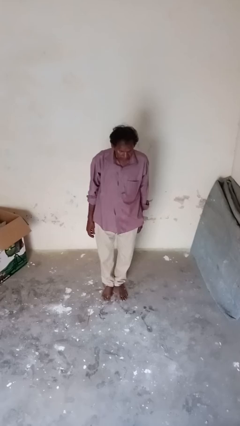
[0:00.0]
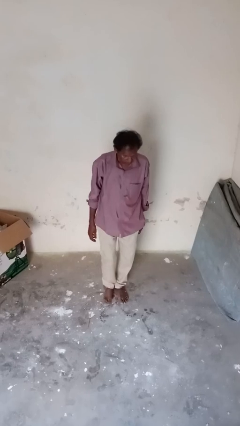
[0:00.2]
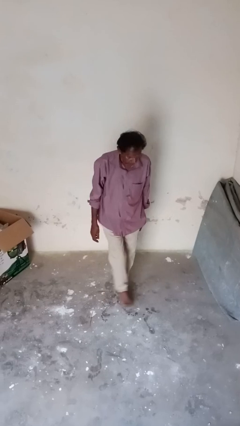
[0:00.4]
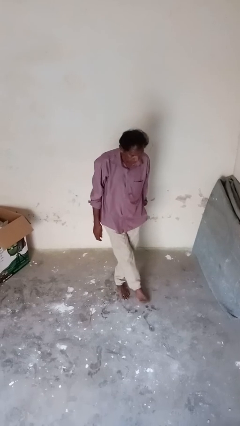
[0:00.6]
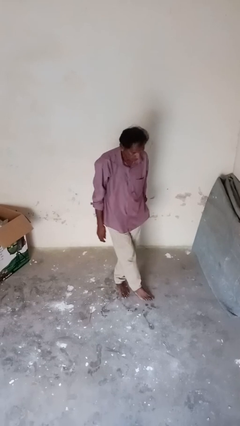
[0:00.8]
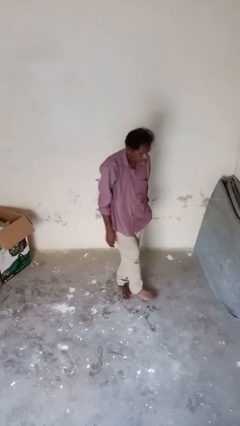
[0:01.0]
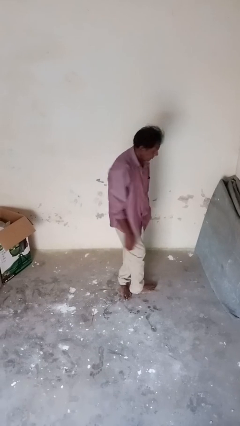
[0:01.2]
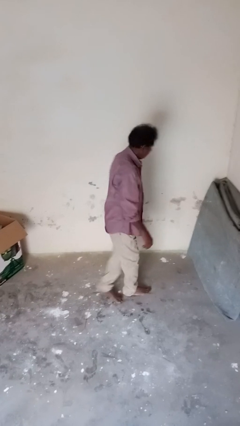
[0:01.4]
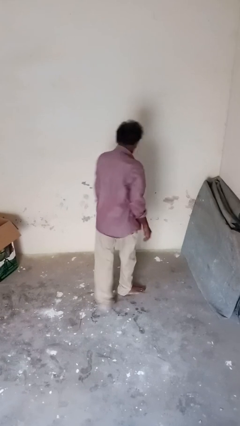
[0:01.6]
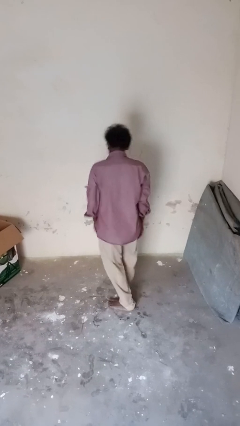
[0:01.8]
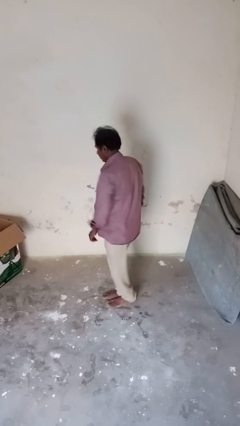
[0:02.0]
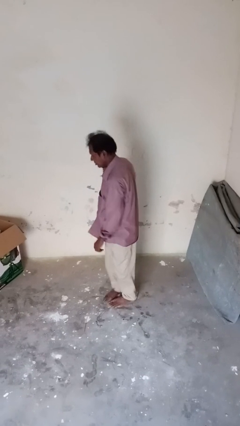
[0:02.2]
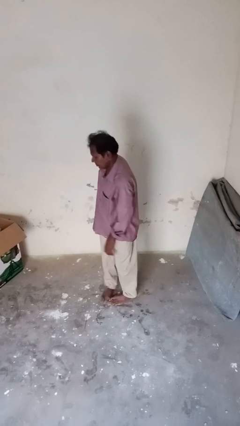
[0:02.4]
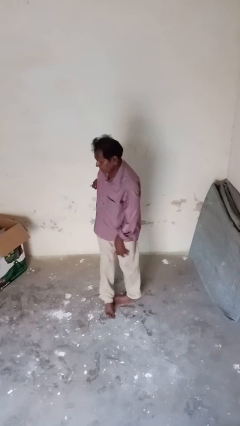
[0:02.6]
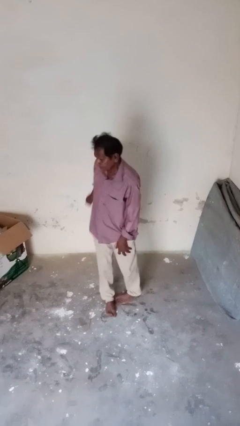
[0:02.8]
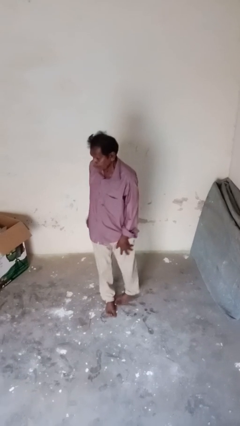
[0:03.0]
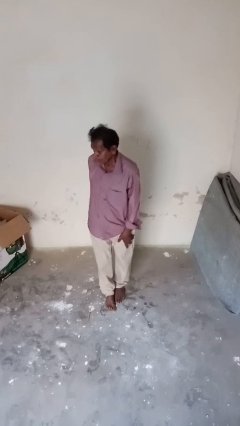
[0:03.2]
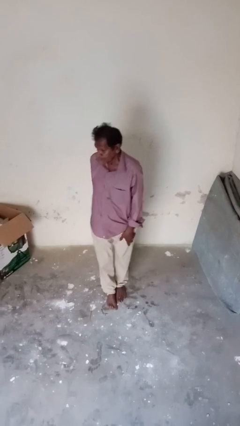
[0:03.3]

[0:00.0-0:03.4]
person twirls

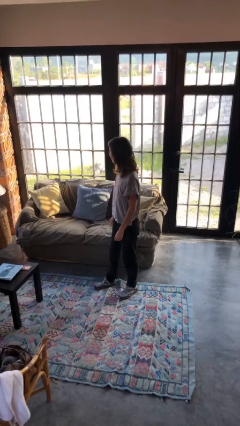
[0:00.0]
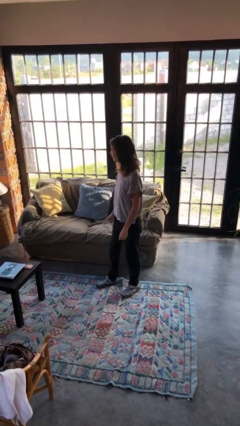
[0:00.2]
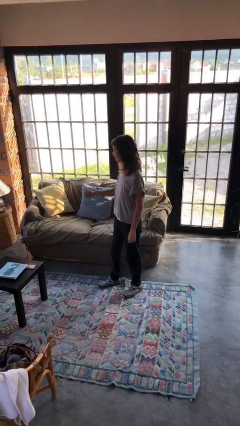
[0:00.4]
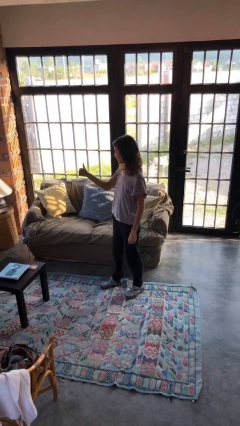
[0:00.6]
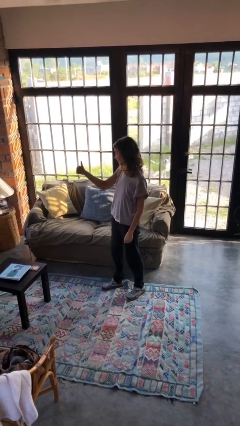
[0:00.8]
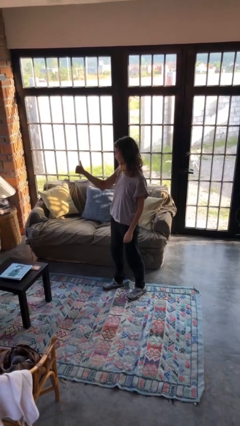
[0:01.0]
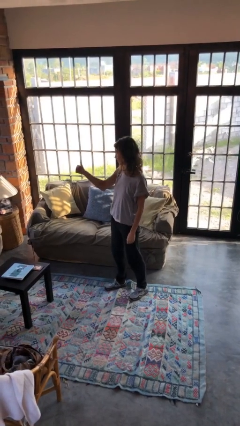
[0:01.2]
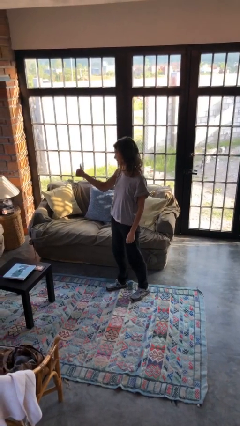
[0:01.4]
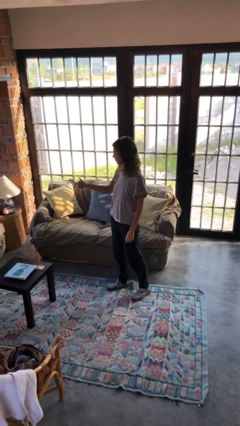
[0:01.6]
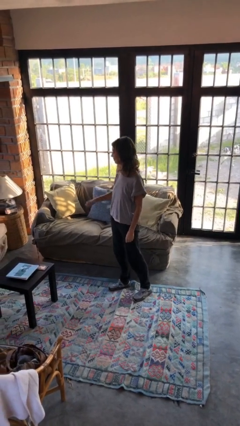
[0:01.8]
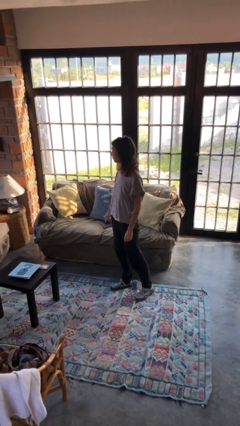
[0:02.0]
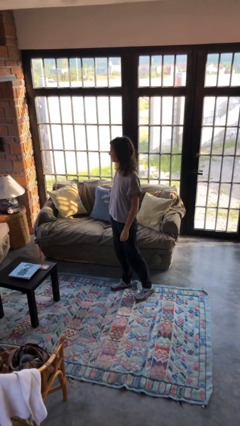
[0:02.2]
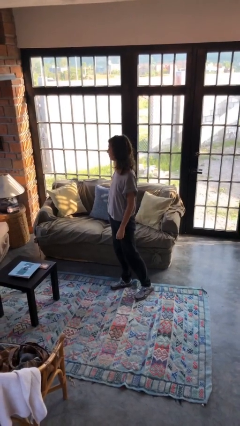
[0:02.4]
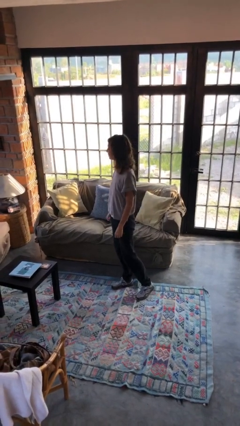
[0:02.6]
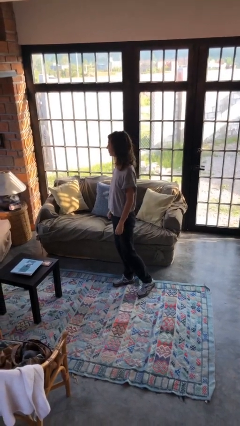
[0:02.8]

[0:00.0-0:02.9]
person gestures thumbs up

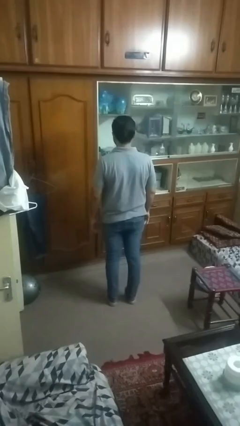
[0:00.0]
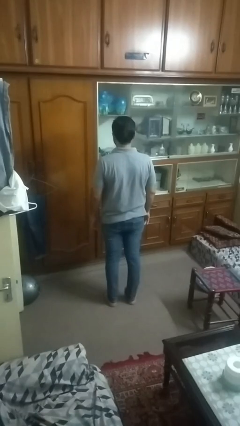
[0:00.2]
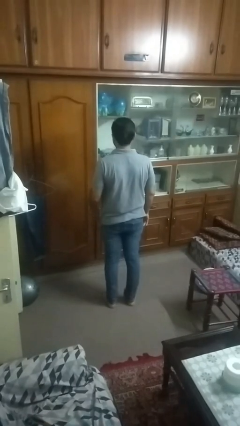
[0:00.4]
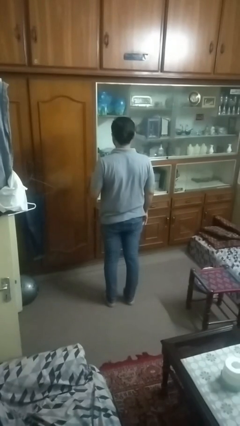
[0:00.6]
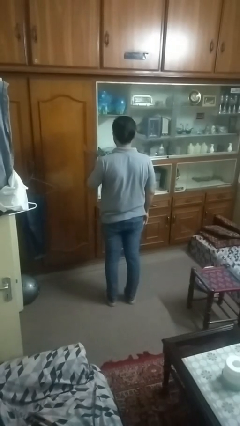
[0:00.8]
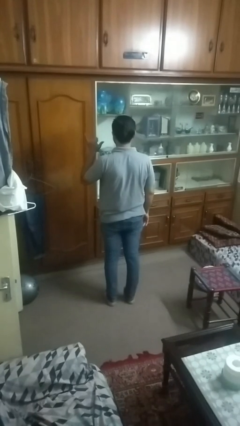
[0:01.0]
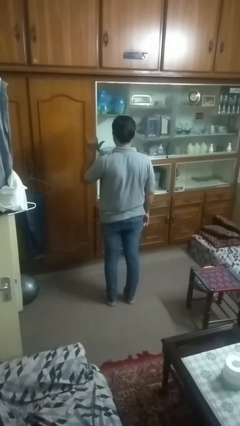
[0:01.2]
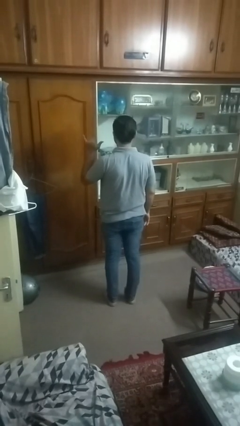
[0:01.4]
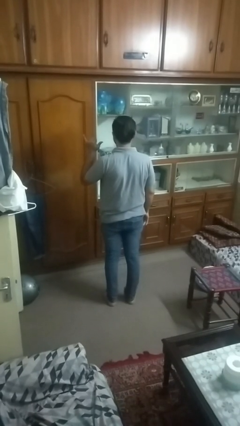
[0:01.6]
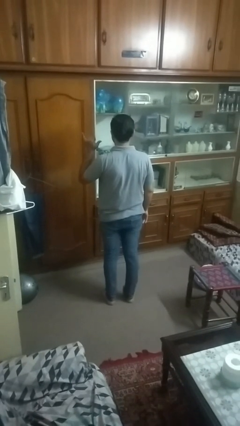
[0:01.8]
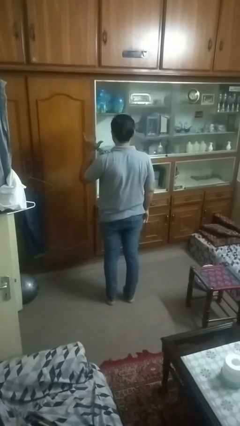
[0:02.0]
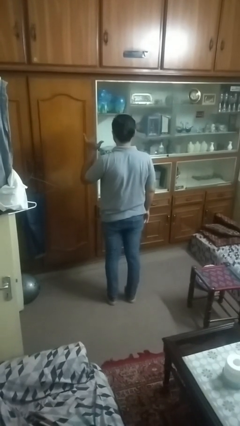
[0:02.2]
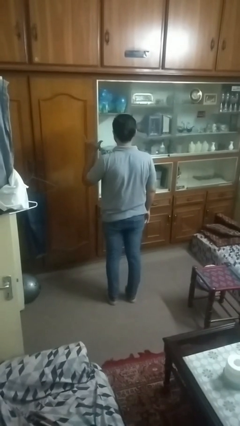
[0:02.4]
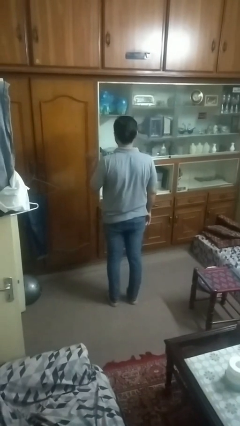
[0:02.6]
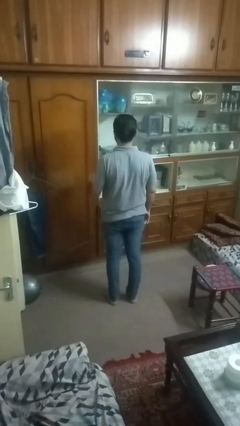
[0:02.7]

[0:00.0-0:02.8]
person gestures hang loose

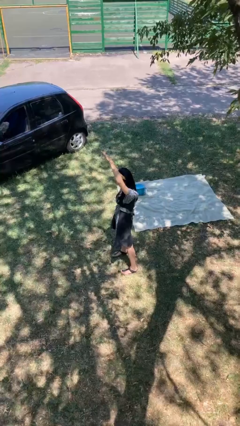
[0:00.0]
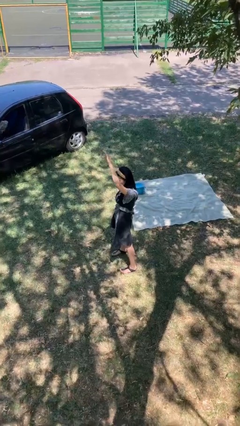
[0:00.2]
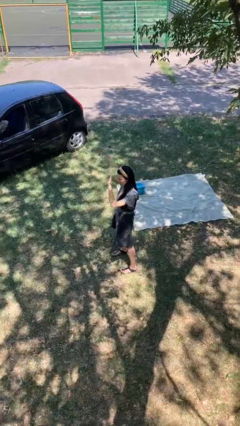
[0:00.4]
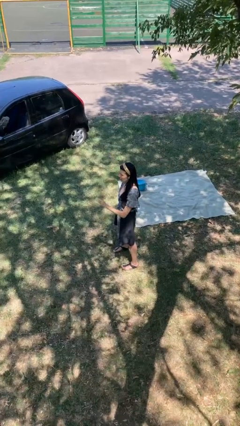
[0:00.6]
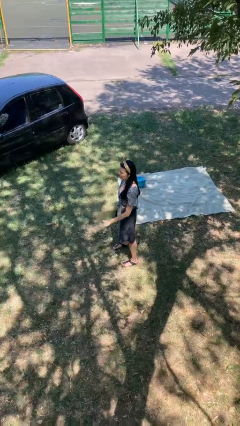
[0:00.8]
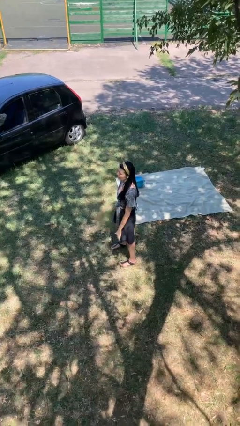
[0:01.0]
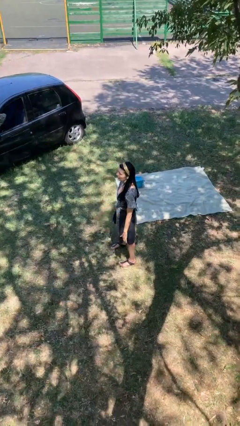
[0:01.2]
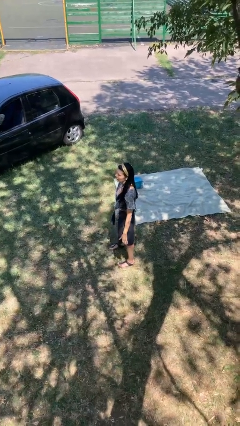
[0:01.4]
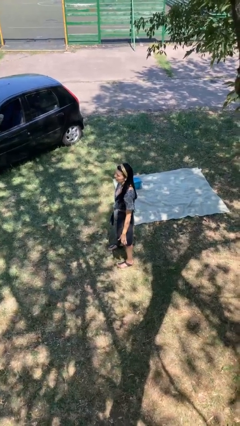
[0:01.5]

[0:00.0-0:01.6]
person gestures lower hand

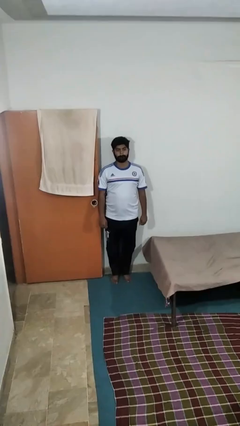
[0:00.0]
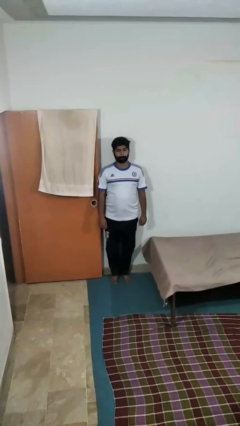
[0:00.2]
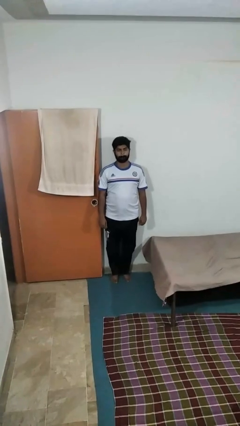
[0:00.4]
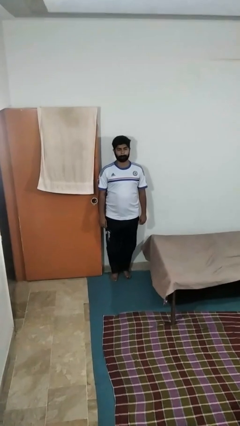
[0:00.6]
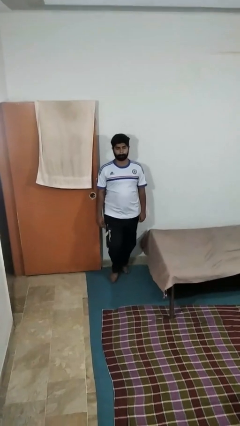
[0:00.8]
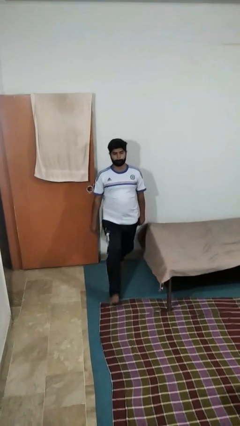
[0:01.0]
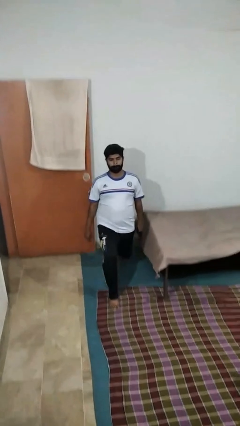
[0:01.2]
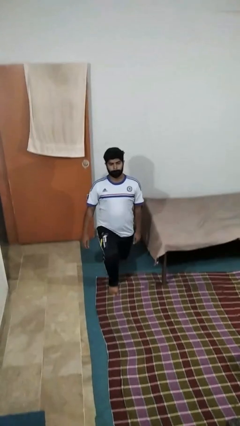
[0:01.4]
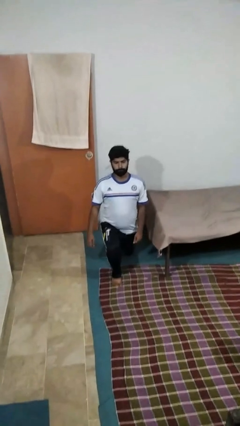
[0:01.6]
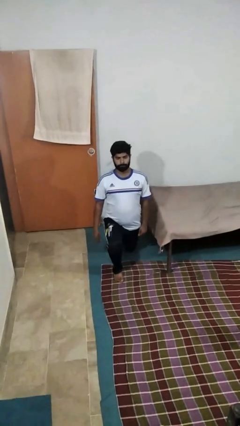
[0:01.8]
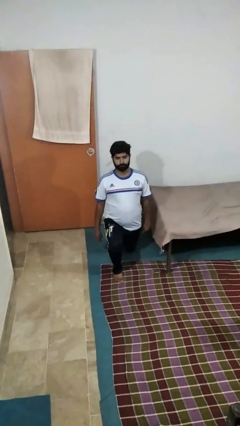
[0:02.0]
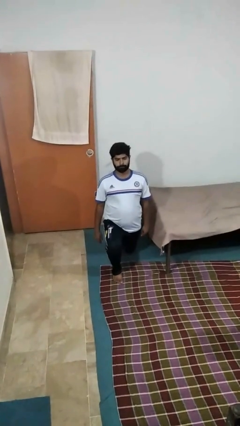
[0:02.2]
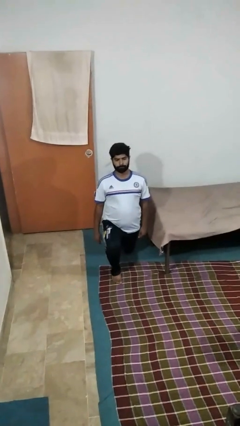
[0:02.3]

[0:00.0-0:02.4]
person kneels

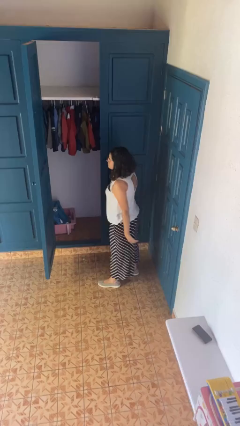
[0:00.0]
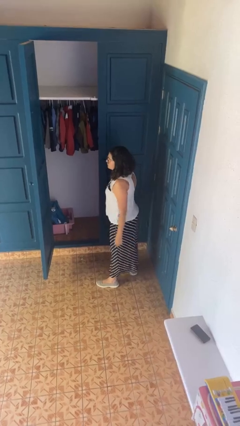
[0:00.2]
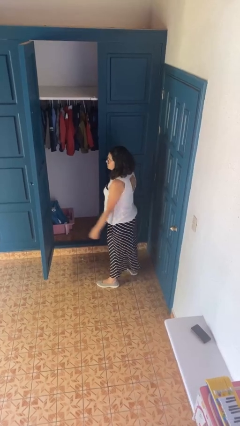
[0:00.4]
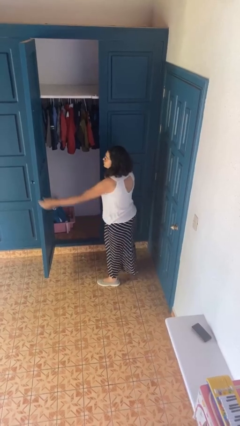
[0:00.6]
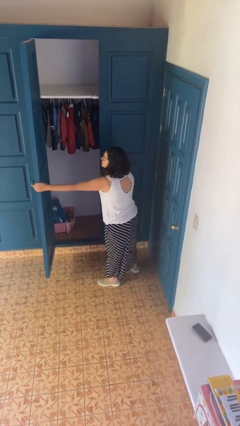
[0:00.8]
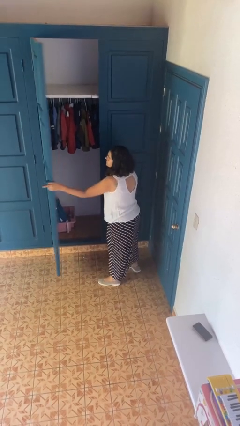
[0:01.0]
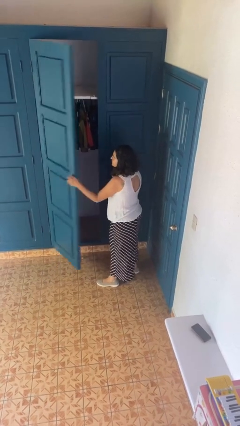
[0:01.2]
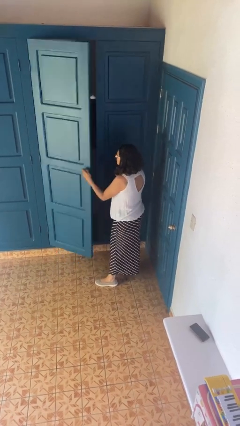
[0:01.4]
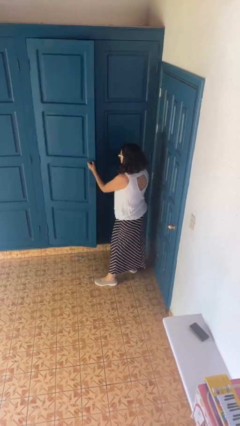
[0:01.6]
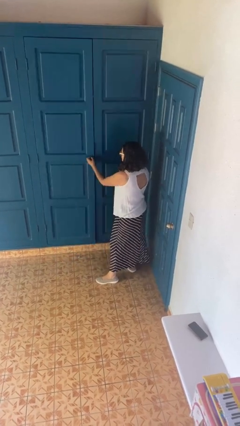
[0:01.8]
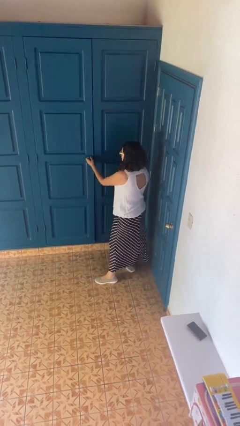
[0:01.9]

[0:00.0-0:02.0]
person closes closet door

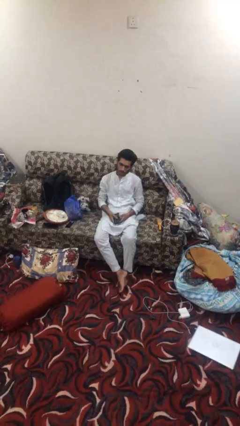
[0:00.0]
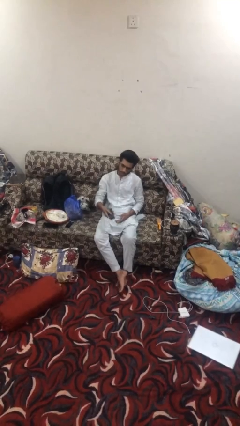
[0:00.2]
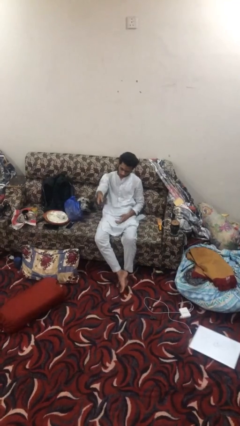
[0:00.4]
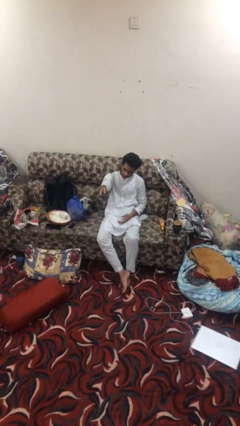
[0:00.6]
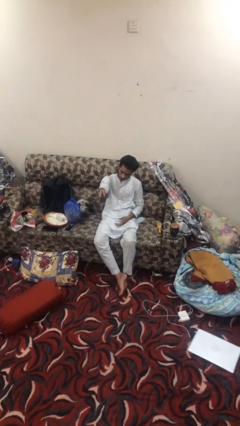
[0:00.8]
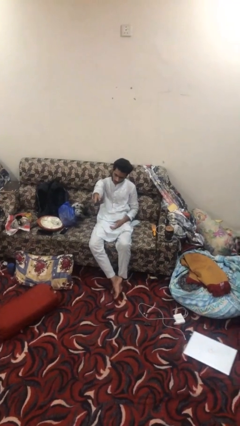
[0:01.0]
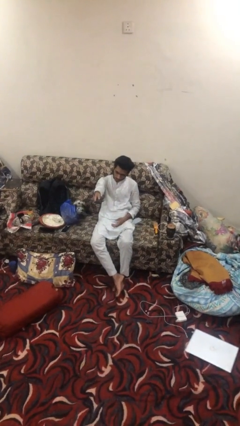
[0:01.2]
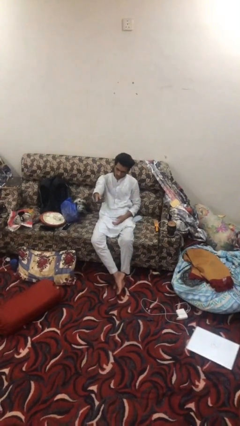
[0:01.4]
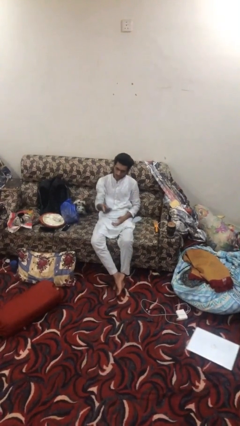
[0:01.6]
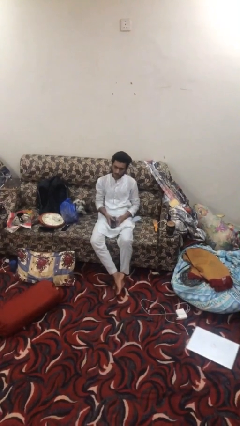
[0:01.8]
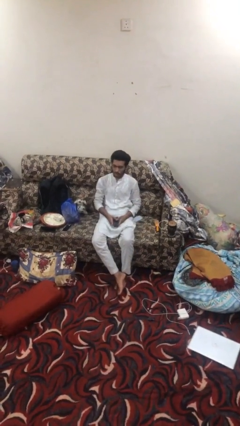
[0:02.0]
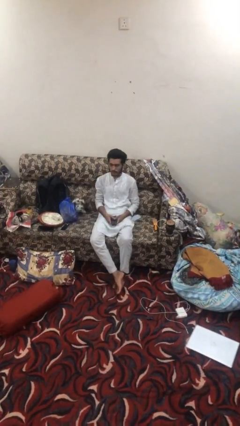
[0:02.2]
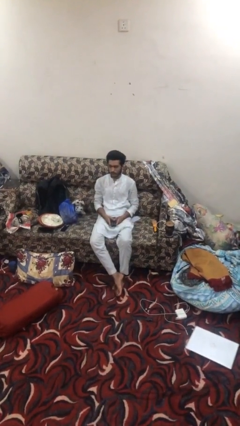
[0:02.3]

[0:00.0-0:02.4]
person uses television remote
